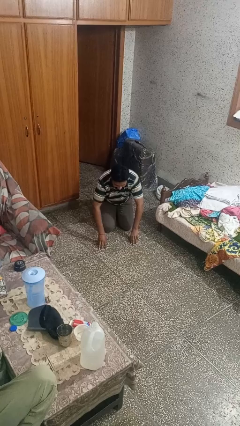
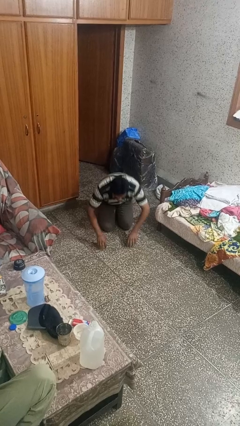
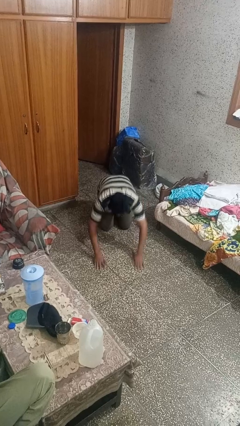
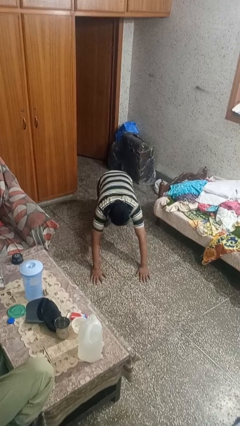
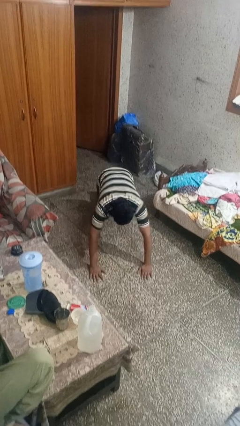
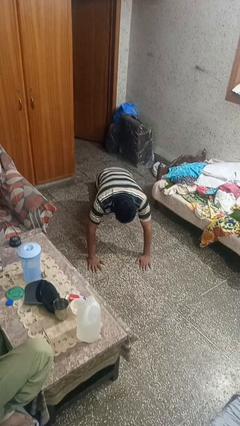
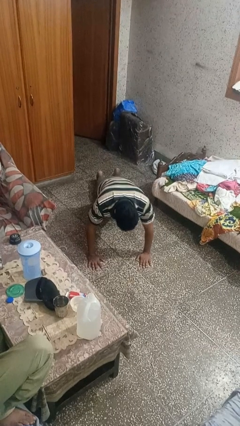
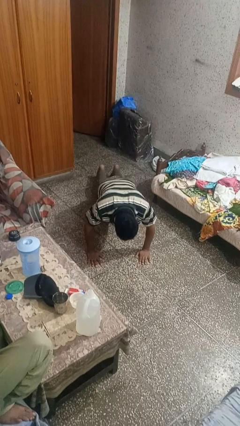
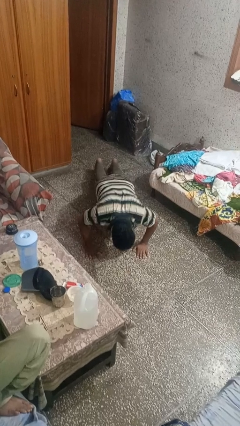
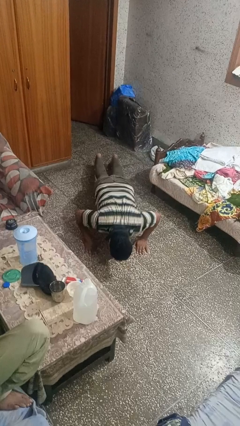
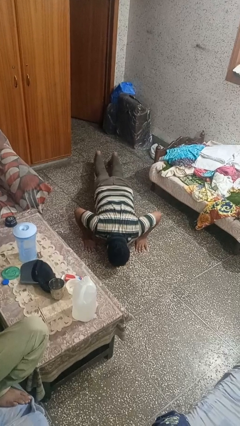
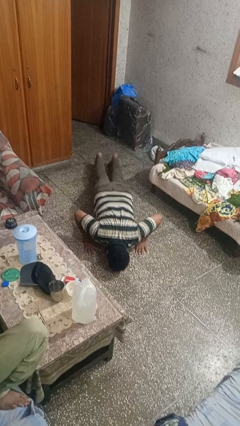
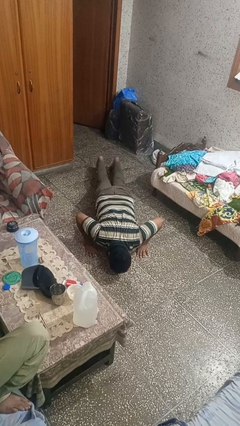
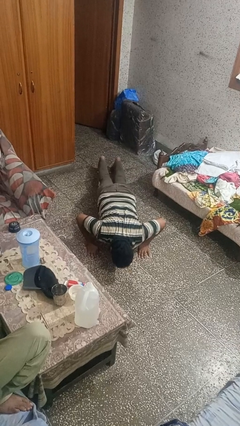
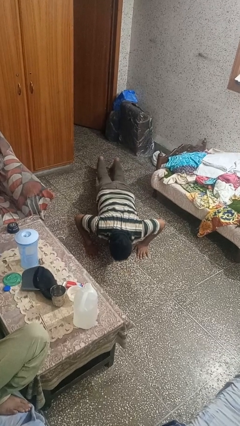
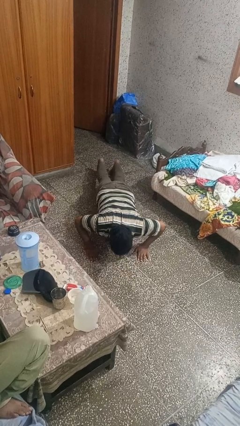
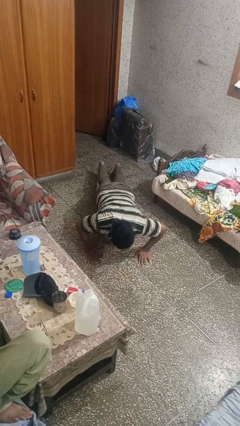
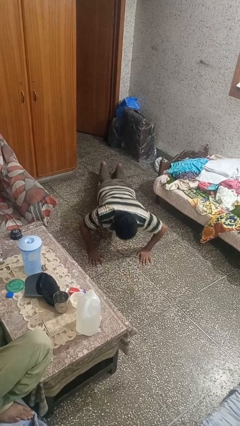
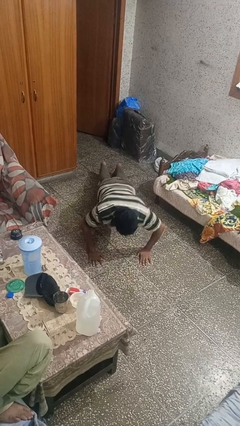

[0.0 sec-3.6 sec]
person exercises with pushup

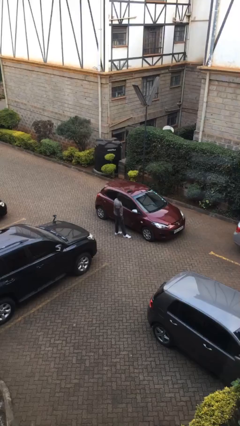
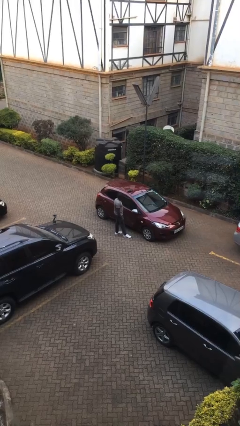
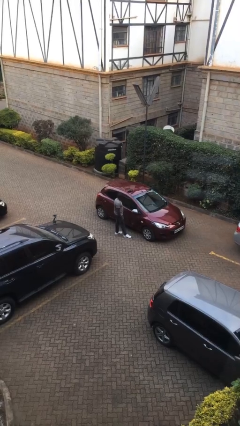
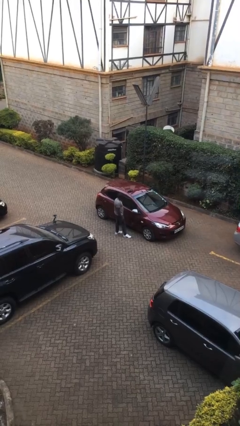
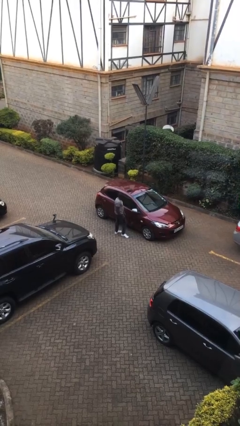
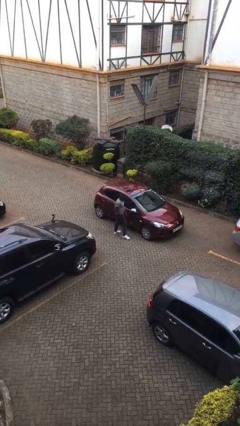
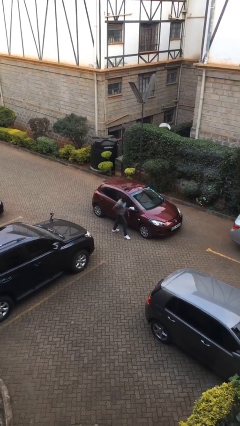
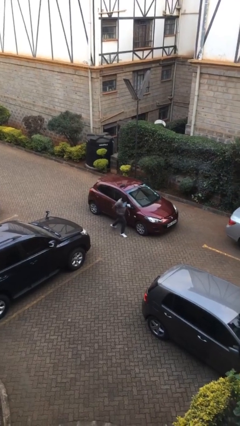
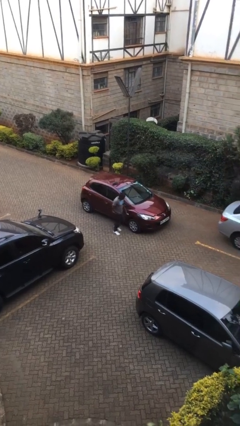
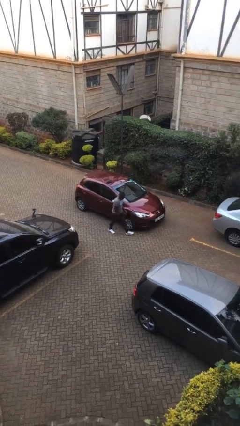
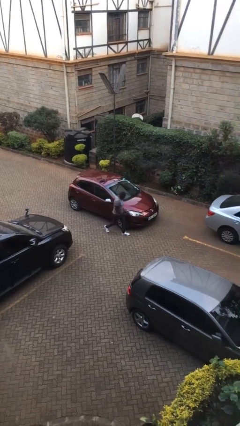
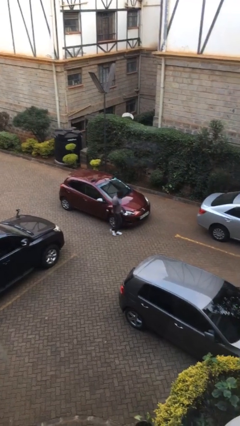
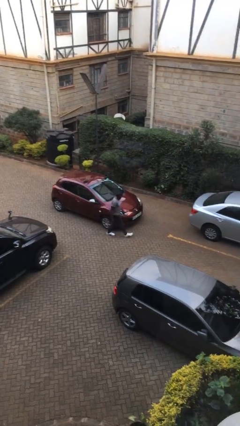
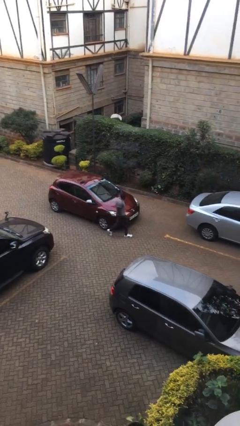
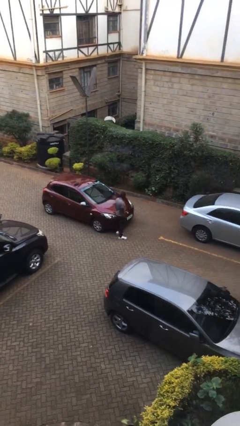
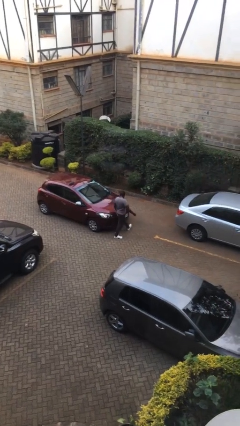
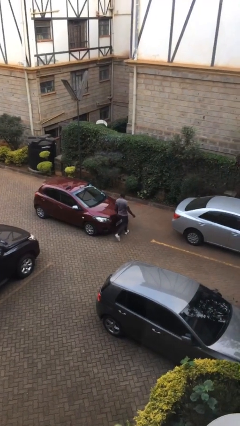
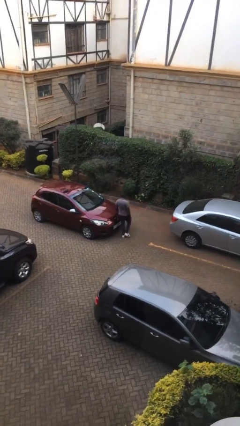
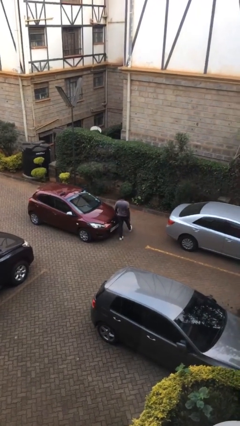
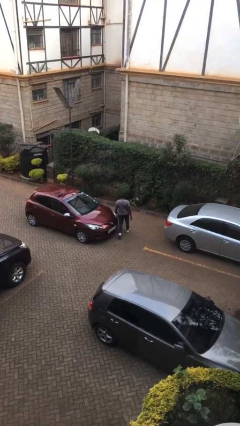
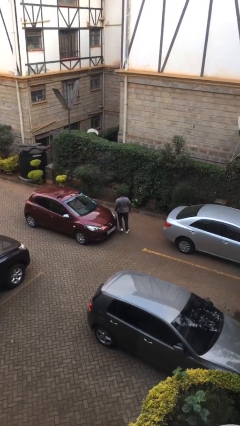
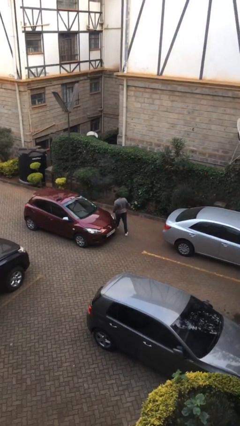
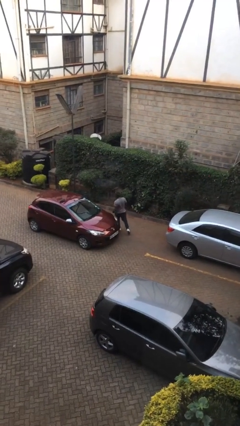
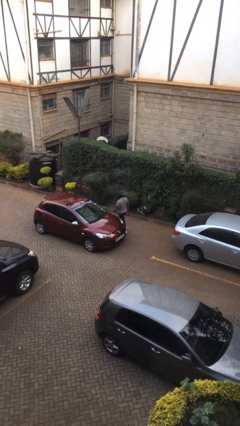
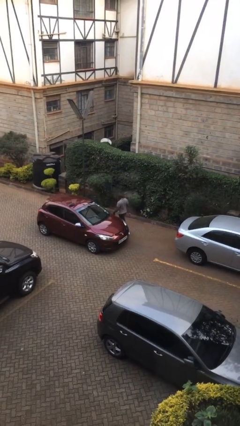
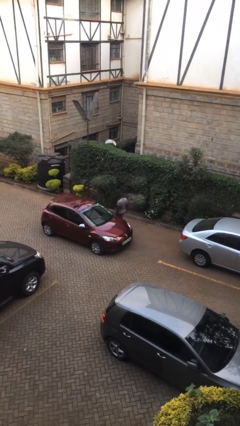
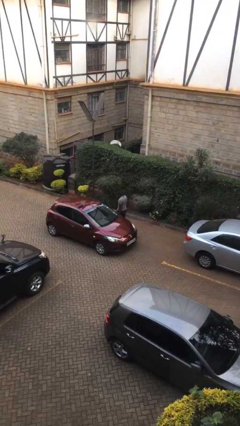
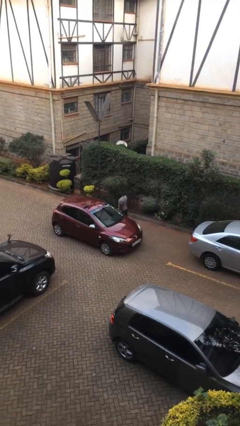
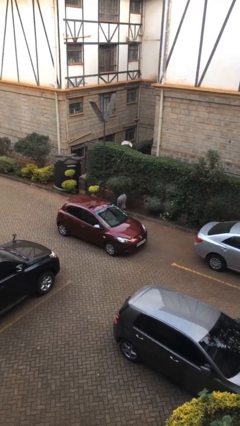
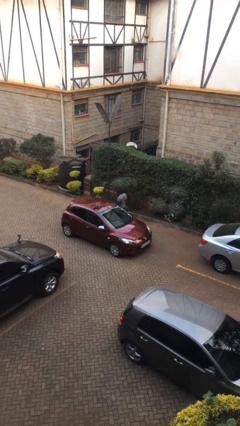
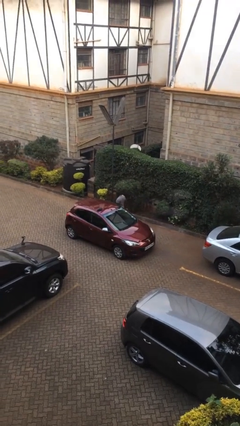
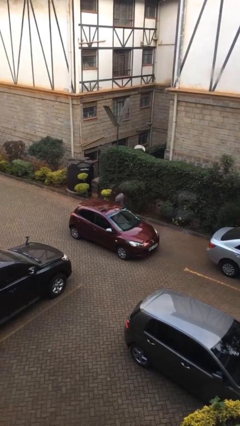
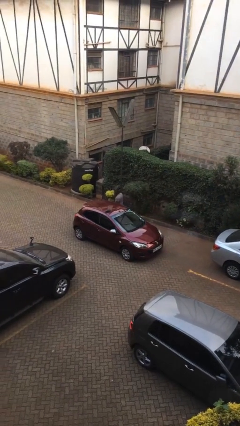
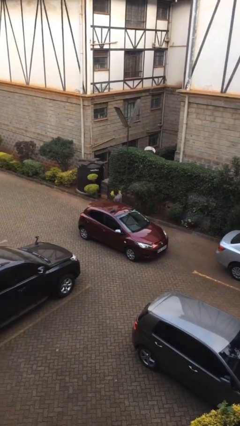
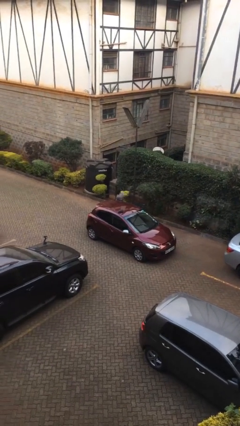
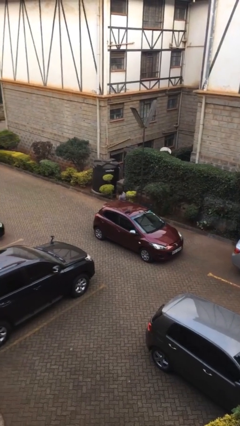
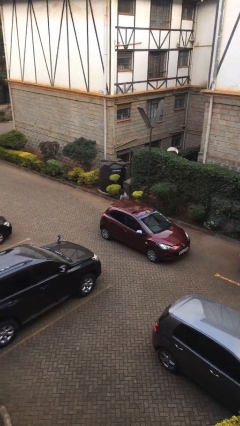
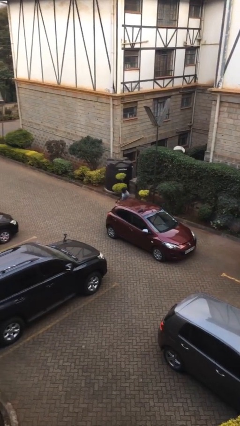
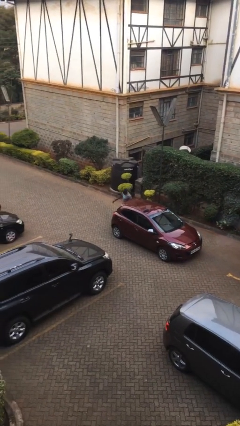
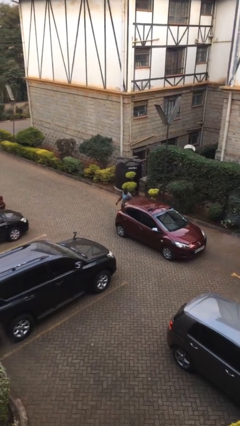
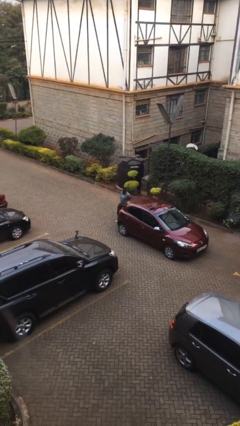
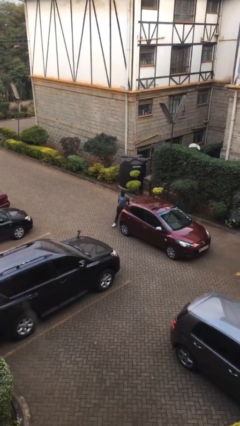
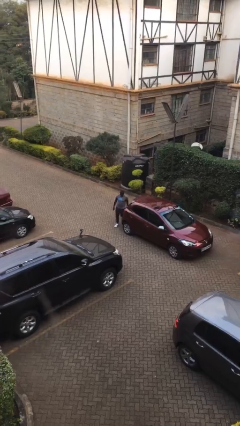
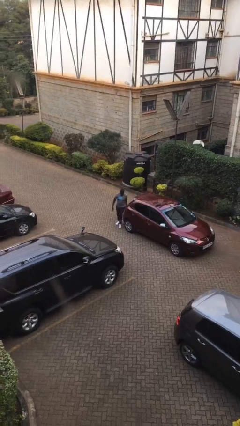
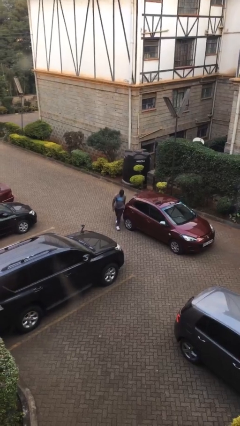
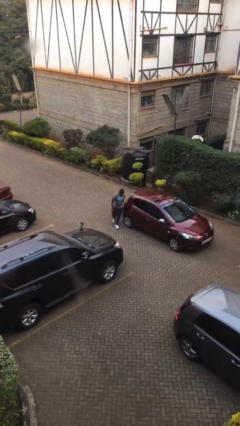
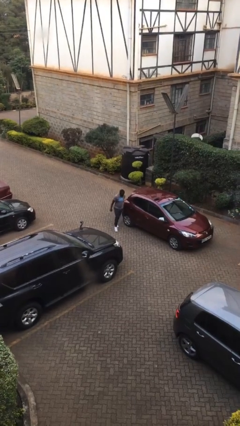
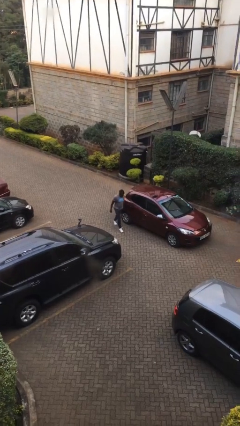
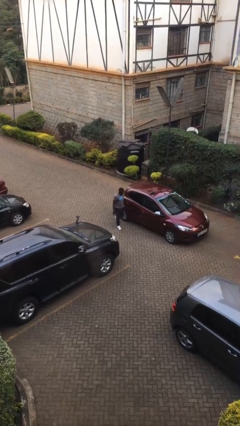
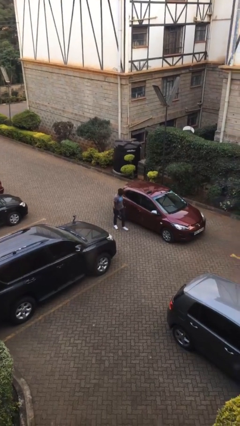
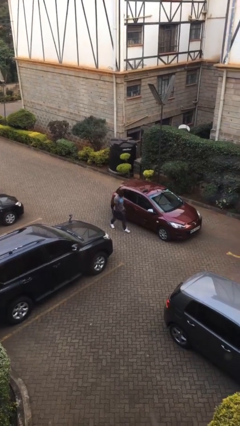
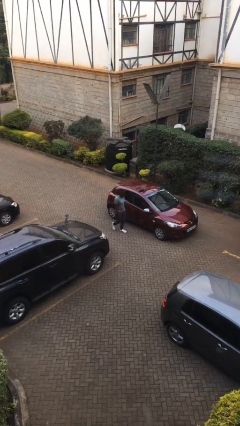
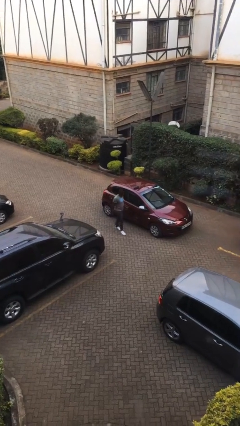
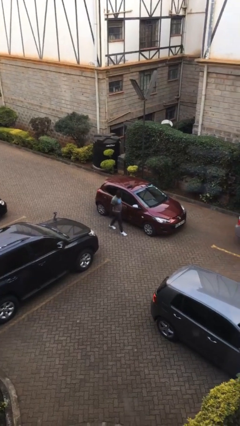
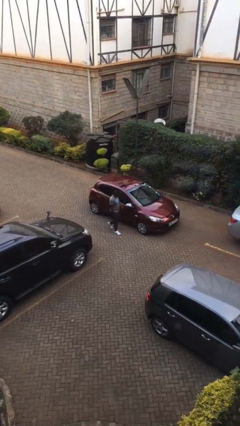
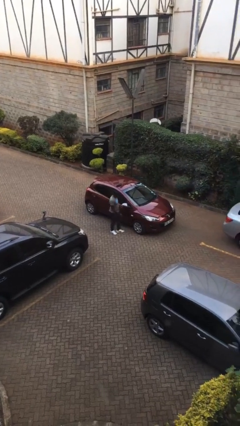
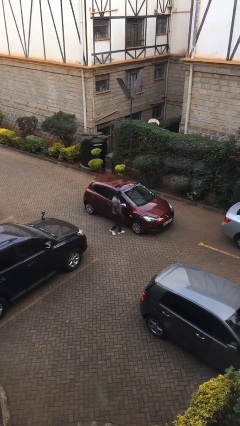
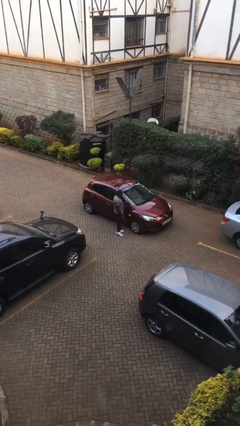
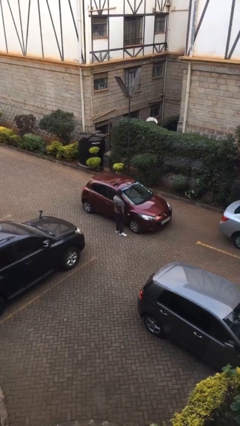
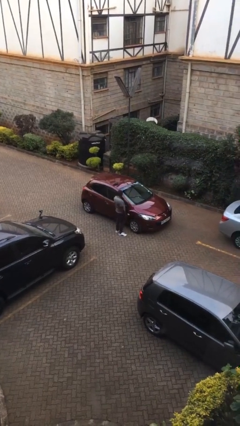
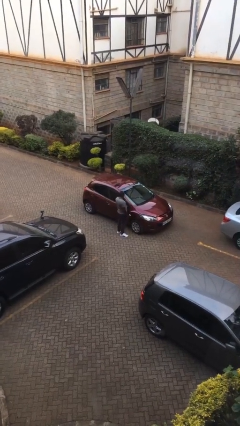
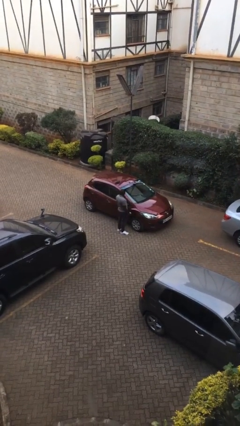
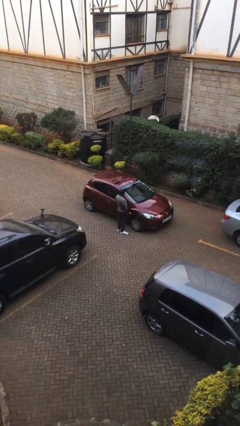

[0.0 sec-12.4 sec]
person walks around car

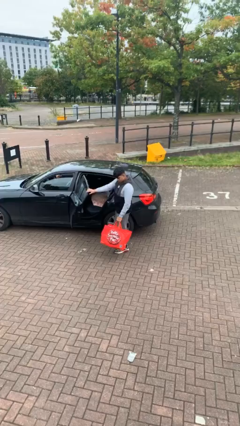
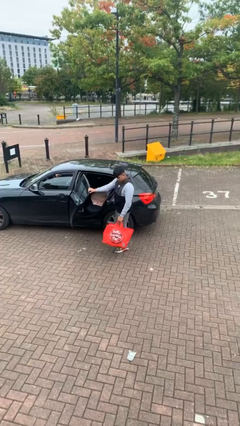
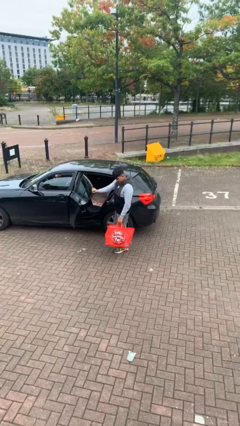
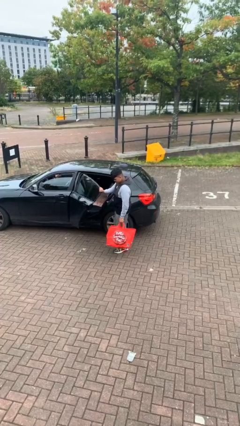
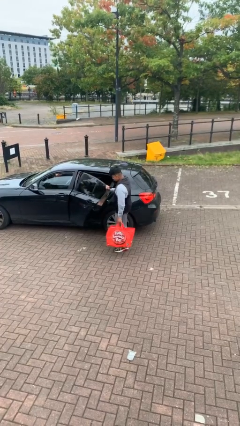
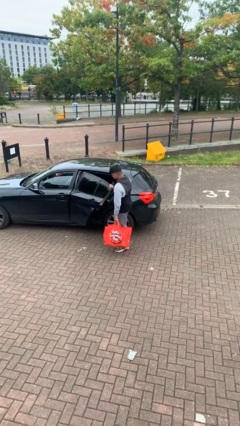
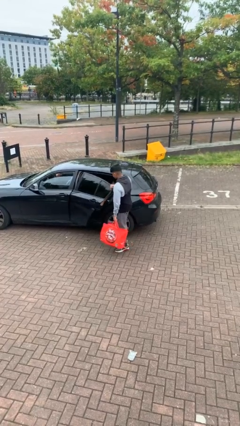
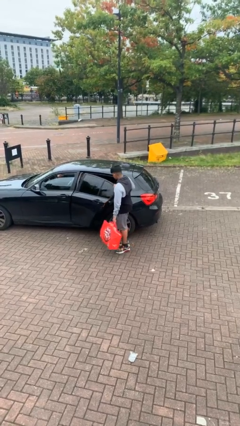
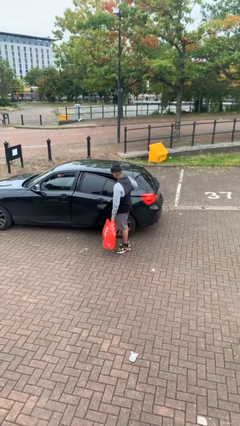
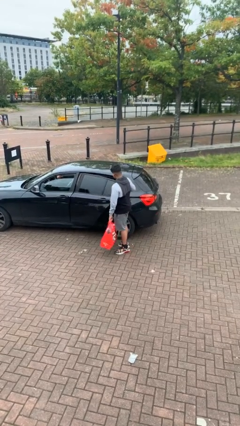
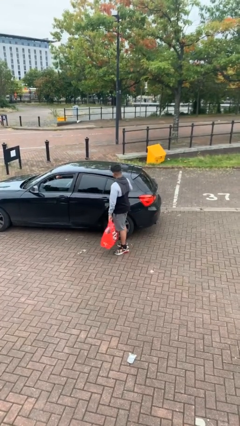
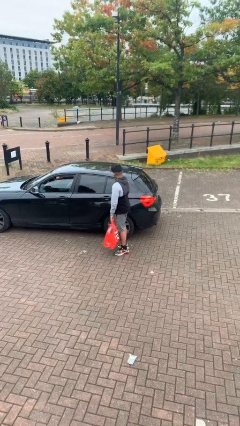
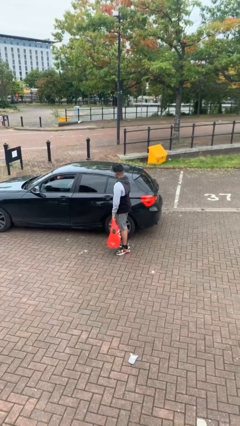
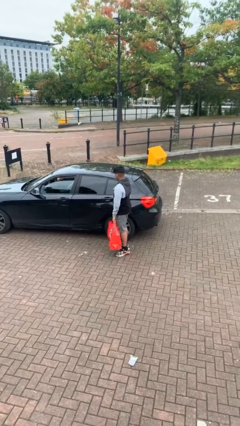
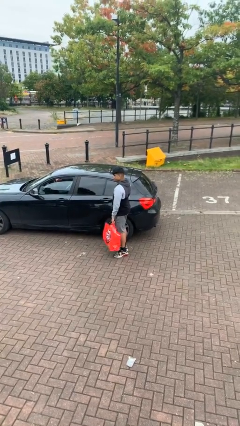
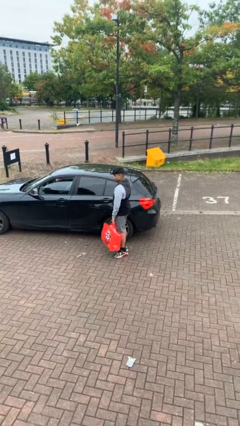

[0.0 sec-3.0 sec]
person closes car door
